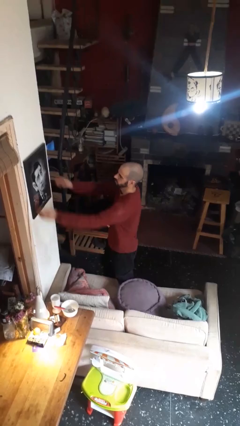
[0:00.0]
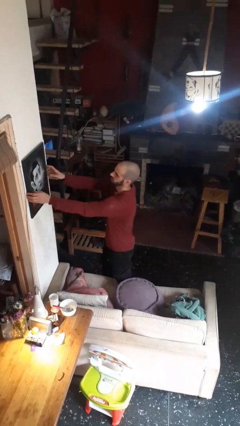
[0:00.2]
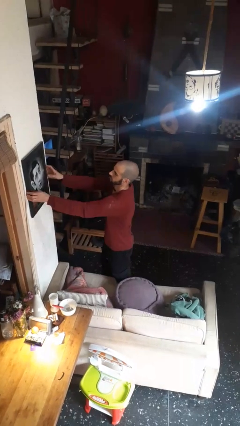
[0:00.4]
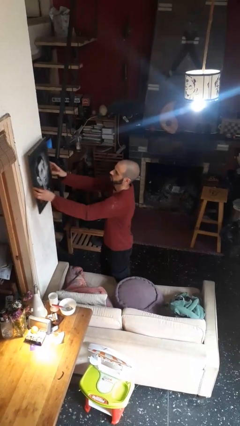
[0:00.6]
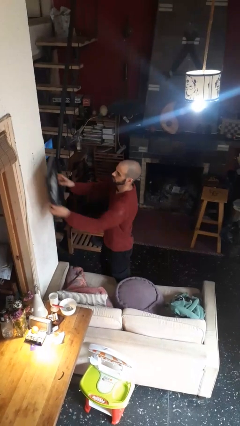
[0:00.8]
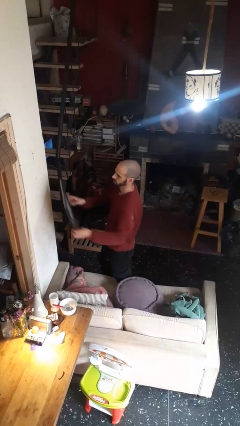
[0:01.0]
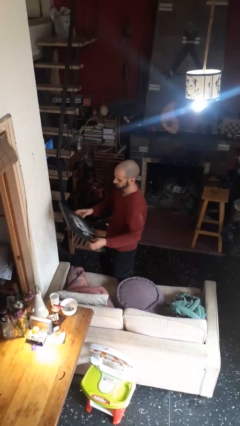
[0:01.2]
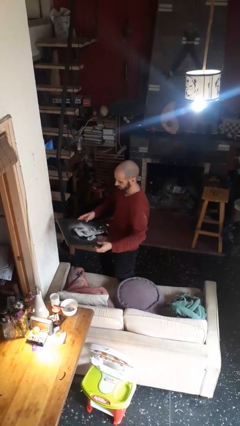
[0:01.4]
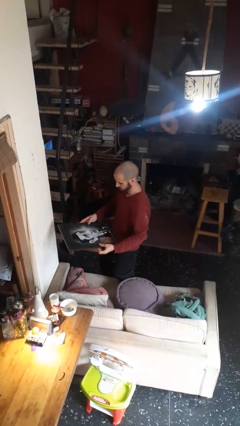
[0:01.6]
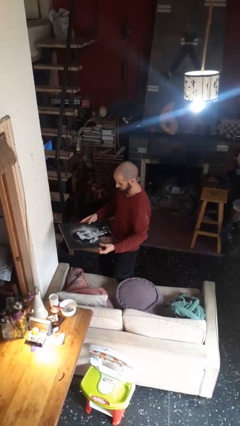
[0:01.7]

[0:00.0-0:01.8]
person takes down picture frame

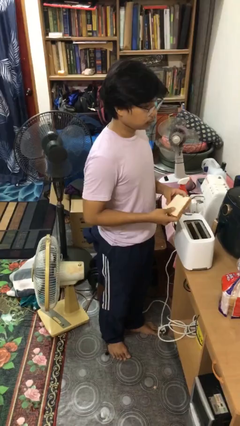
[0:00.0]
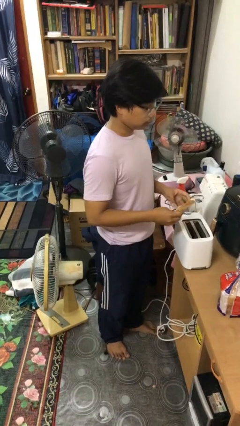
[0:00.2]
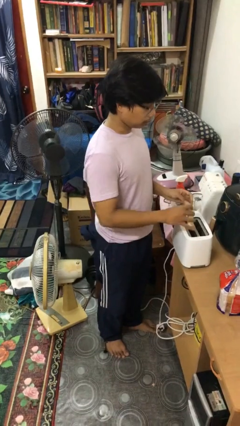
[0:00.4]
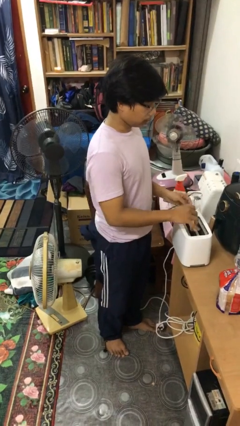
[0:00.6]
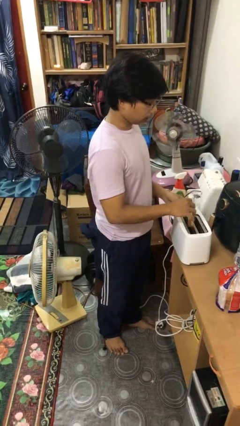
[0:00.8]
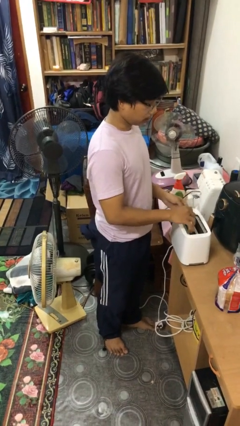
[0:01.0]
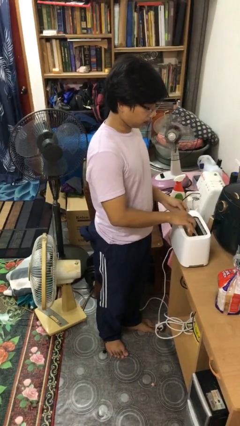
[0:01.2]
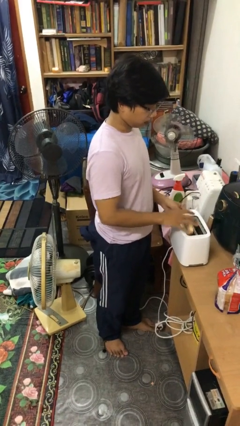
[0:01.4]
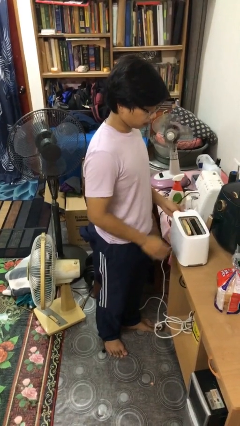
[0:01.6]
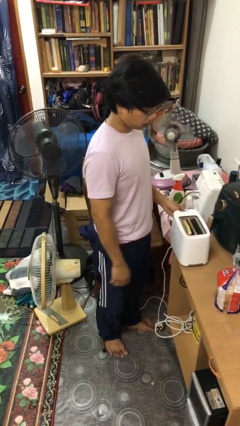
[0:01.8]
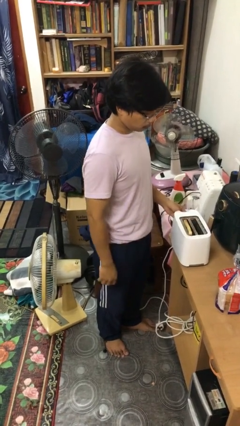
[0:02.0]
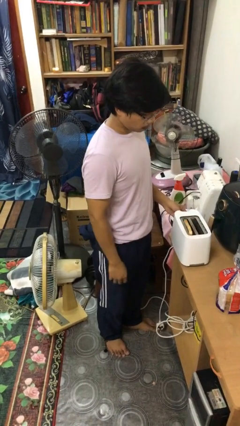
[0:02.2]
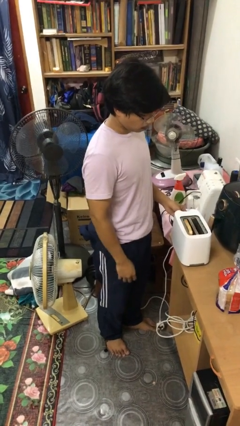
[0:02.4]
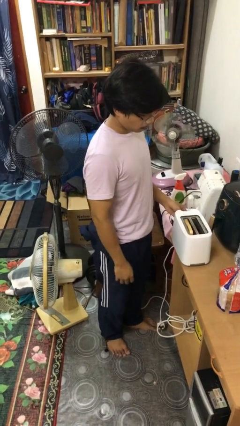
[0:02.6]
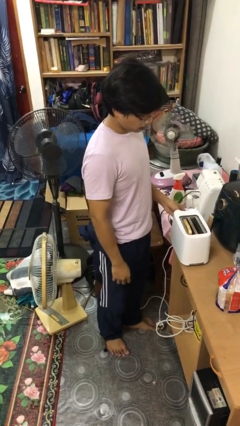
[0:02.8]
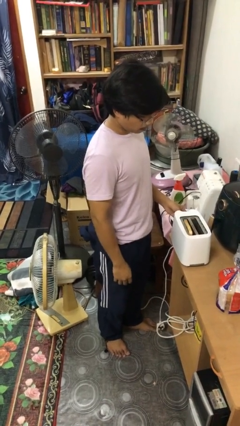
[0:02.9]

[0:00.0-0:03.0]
person puts object into toaster

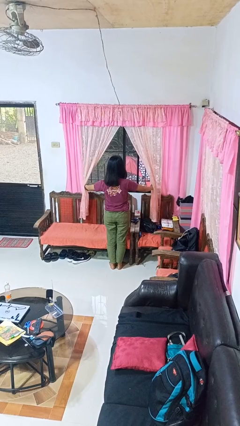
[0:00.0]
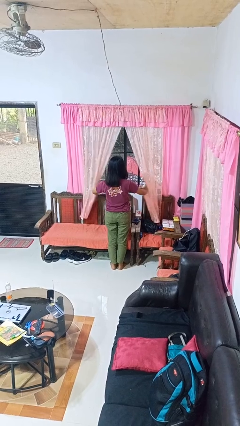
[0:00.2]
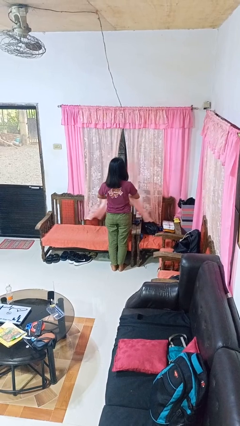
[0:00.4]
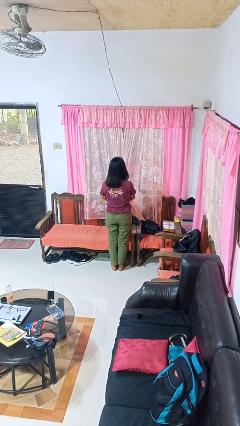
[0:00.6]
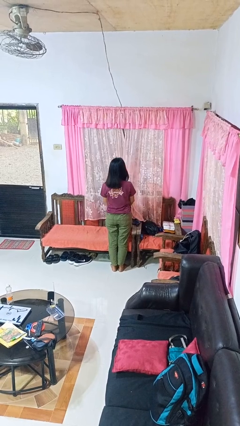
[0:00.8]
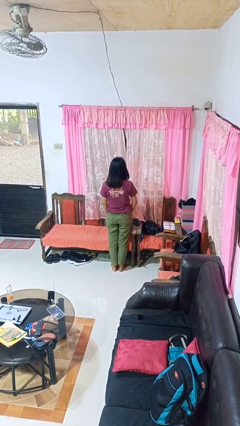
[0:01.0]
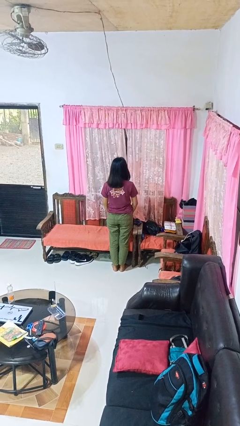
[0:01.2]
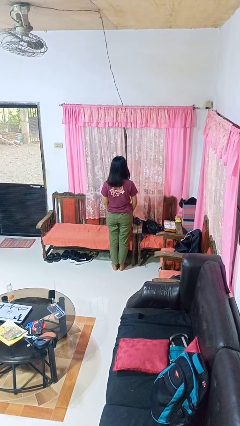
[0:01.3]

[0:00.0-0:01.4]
person closes curtains

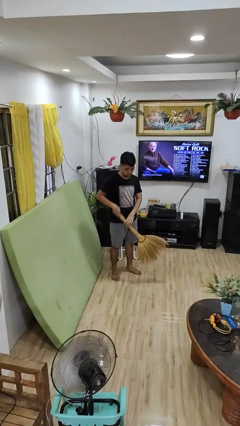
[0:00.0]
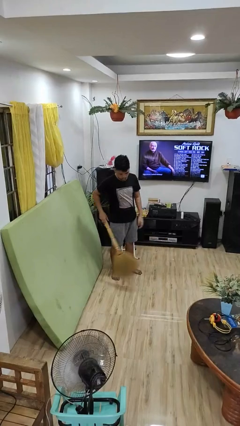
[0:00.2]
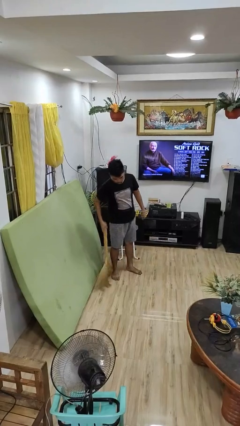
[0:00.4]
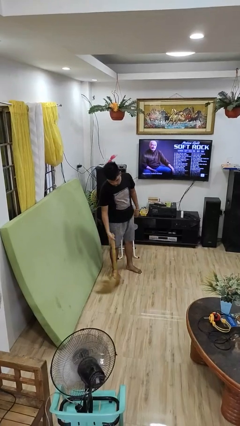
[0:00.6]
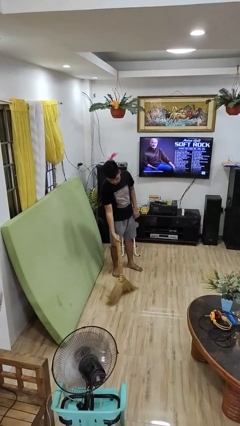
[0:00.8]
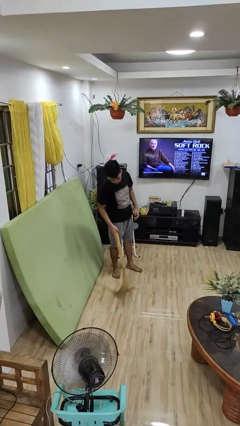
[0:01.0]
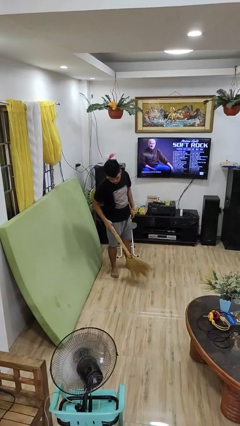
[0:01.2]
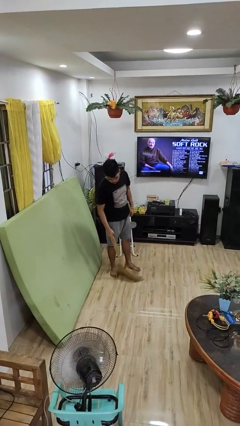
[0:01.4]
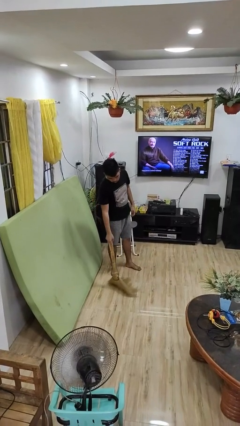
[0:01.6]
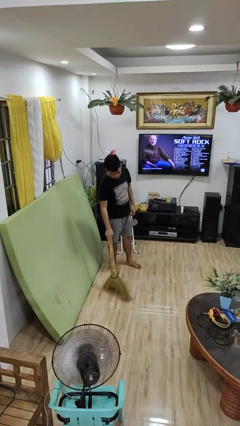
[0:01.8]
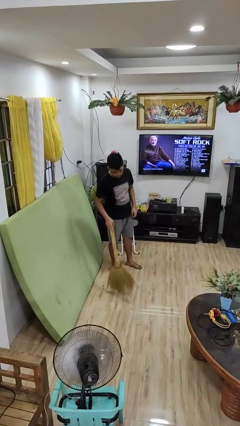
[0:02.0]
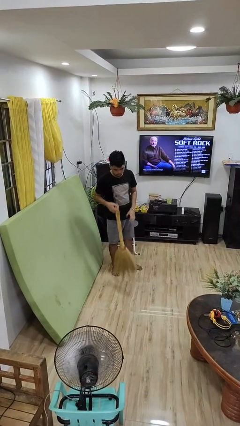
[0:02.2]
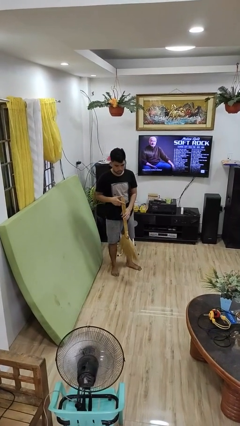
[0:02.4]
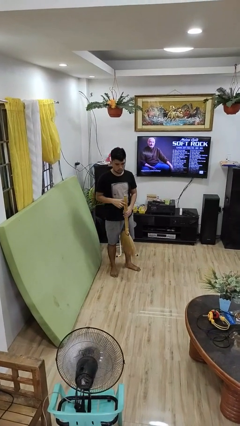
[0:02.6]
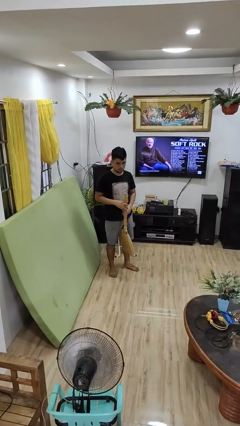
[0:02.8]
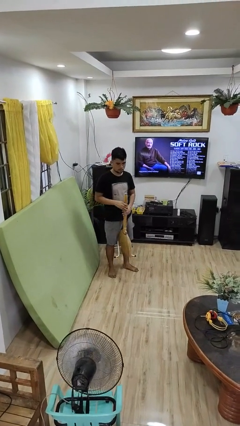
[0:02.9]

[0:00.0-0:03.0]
person sweeps floor

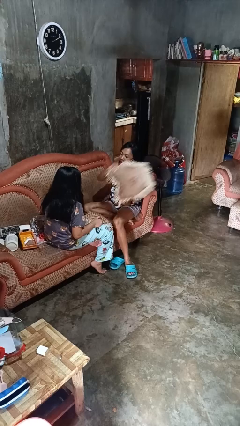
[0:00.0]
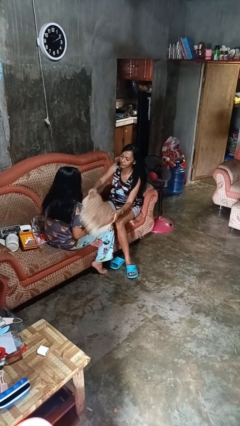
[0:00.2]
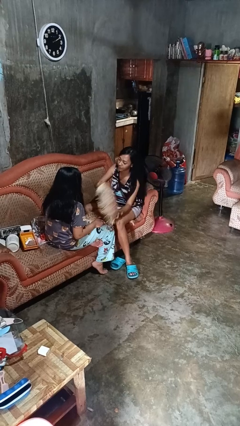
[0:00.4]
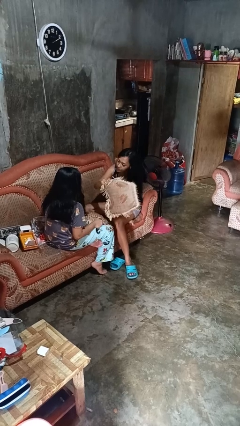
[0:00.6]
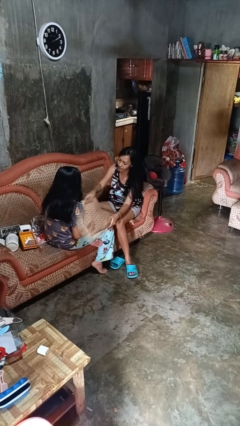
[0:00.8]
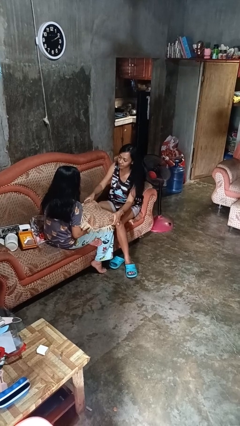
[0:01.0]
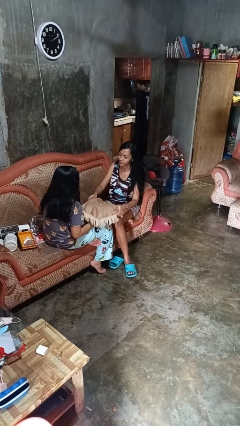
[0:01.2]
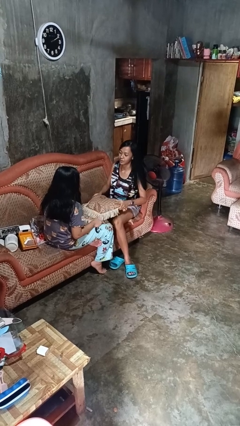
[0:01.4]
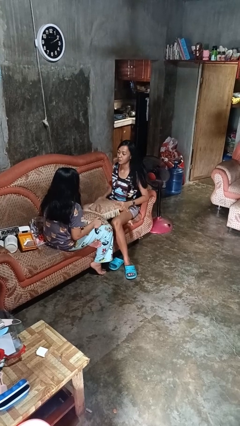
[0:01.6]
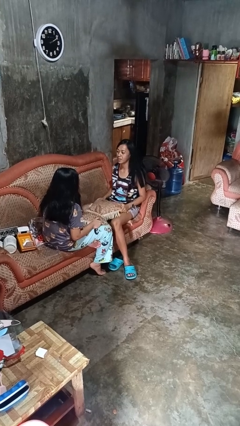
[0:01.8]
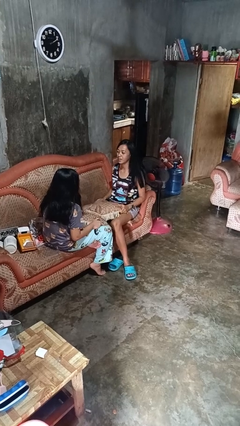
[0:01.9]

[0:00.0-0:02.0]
person hits person with pillow

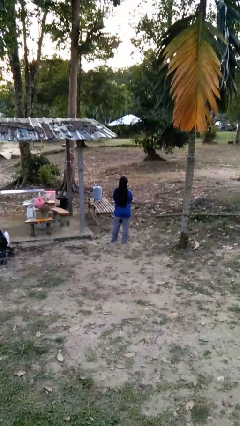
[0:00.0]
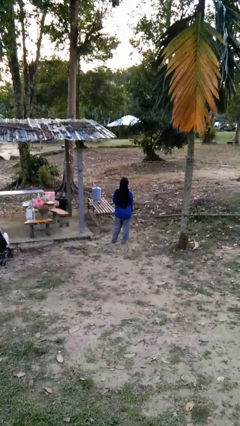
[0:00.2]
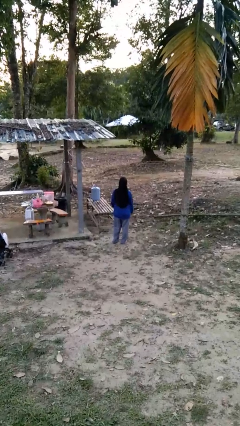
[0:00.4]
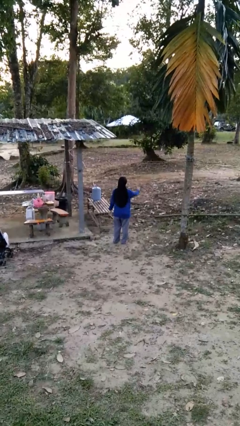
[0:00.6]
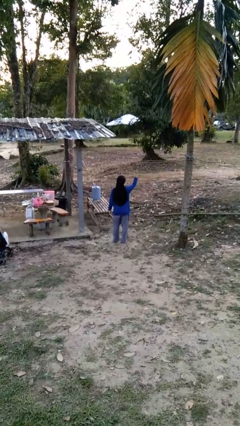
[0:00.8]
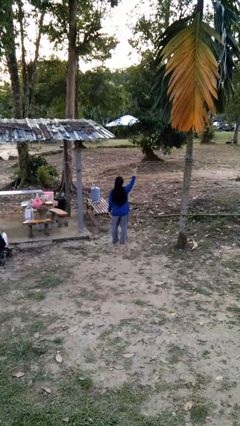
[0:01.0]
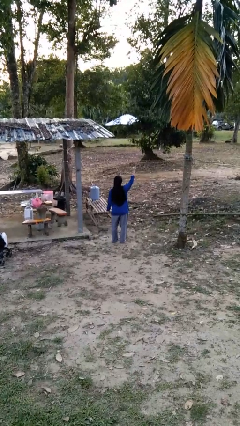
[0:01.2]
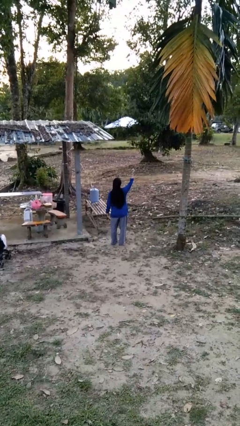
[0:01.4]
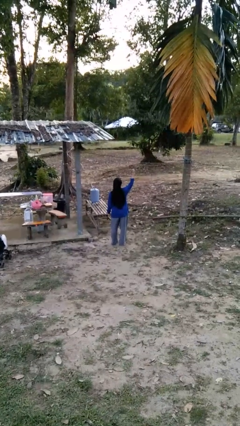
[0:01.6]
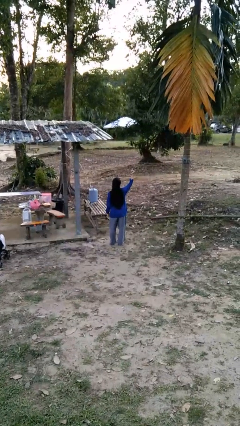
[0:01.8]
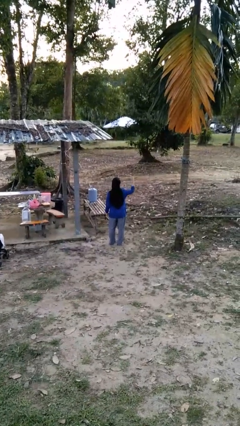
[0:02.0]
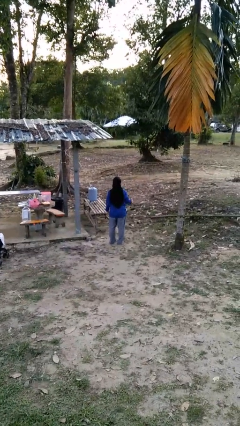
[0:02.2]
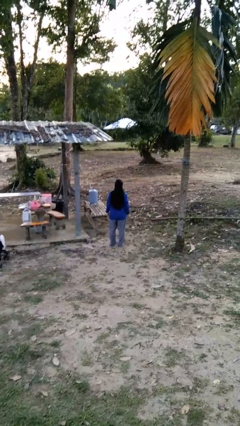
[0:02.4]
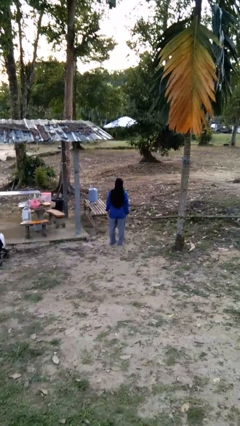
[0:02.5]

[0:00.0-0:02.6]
person gestures hang loose

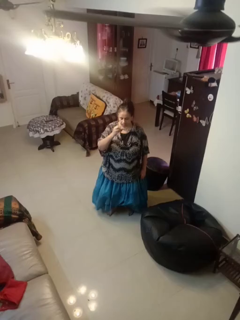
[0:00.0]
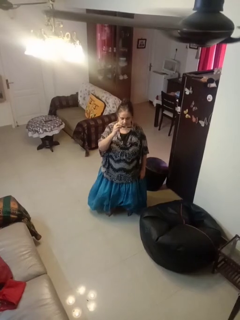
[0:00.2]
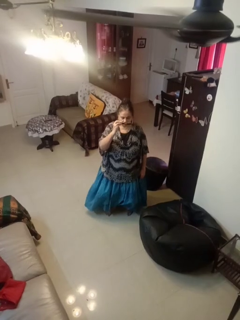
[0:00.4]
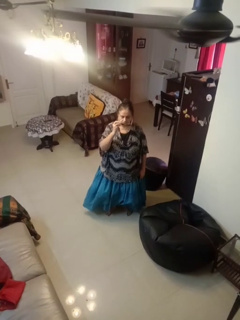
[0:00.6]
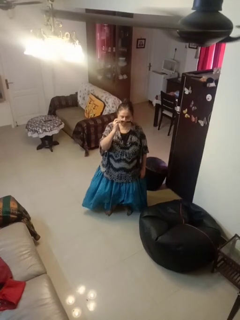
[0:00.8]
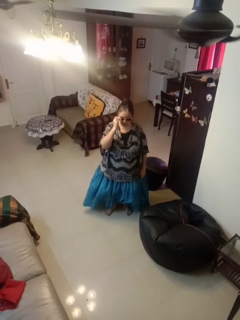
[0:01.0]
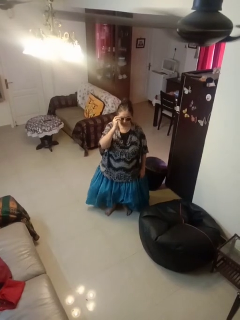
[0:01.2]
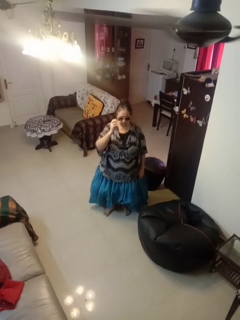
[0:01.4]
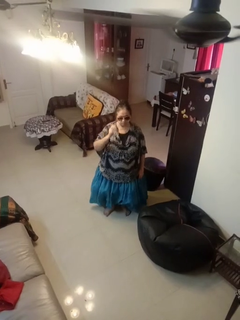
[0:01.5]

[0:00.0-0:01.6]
person puts on sunglasses

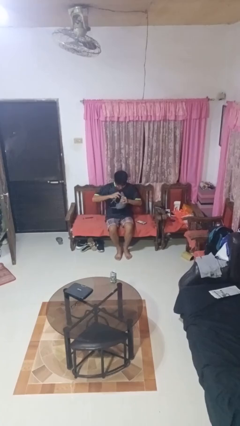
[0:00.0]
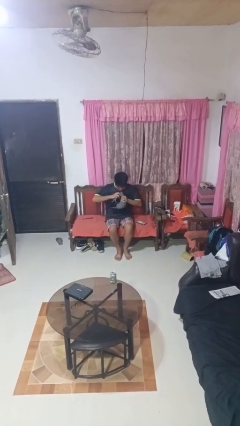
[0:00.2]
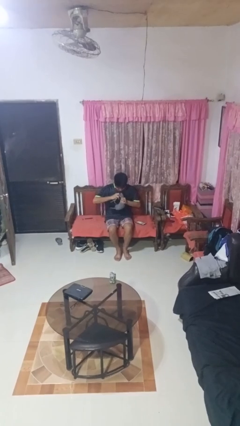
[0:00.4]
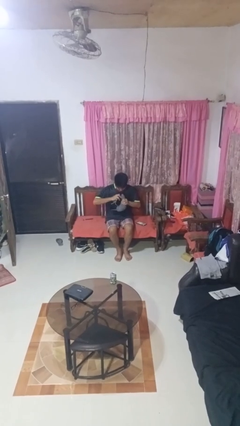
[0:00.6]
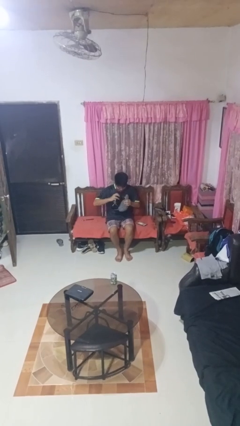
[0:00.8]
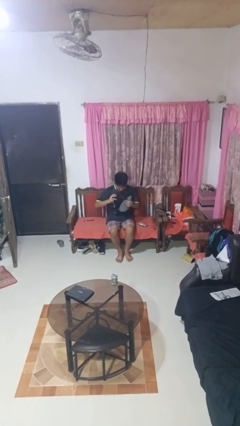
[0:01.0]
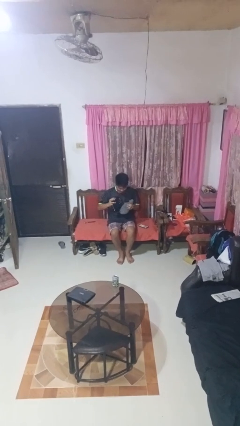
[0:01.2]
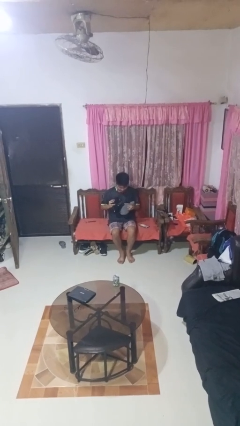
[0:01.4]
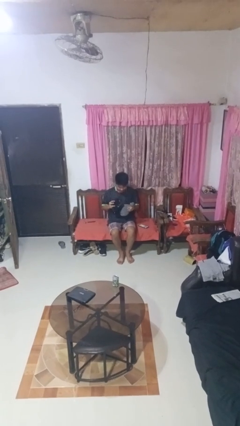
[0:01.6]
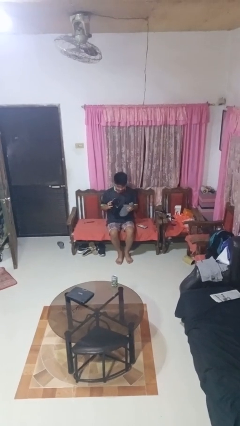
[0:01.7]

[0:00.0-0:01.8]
person squeezes object
